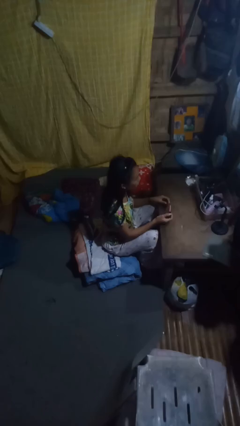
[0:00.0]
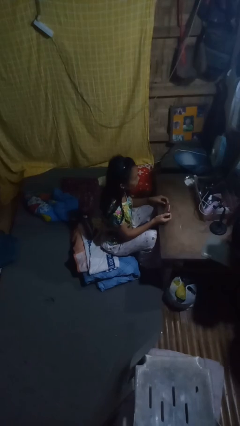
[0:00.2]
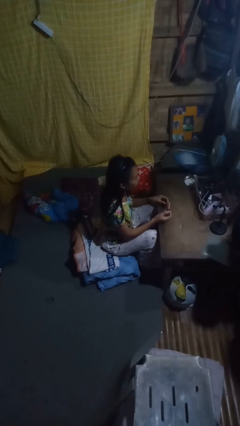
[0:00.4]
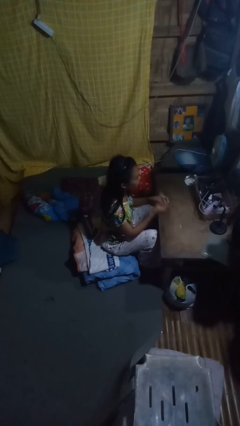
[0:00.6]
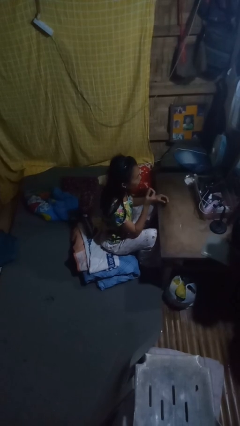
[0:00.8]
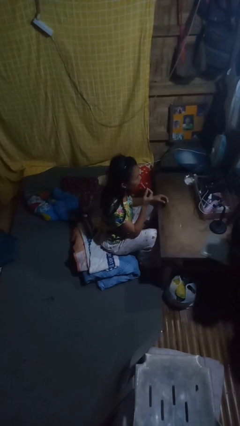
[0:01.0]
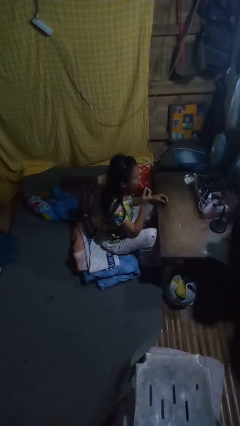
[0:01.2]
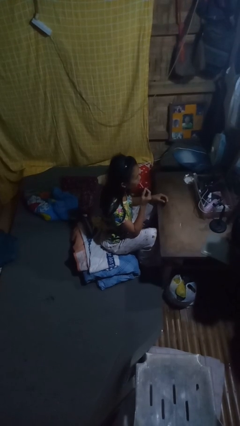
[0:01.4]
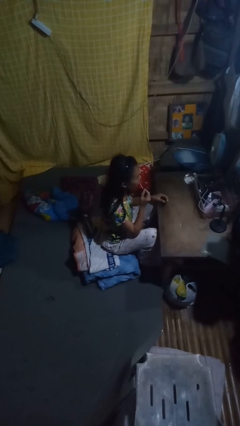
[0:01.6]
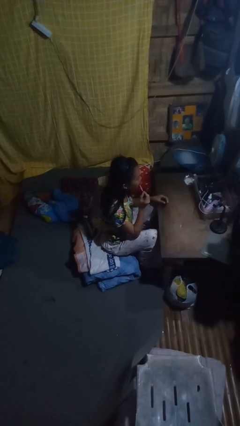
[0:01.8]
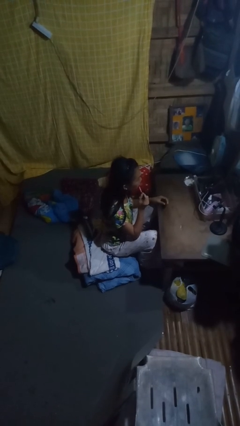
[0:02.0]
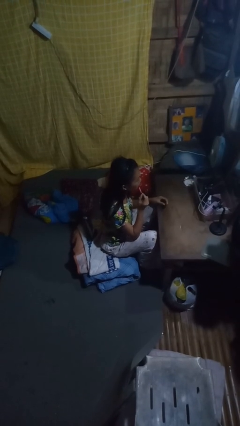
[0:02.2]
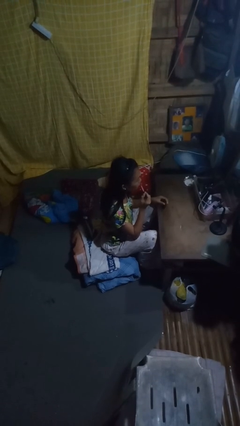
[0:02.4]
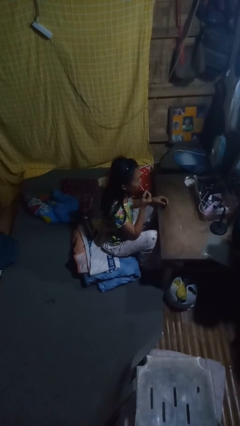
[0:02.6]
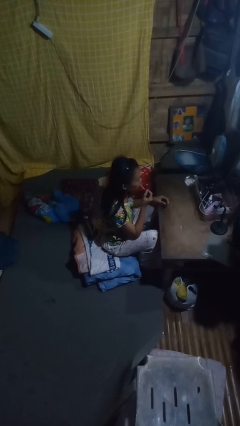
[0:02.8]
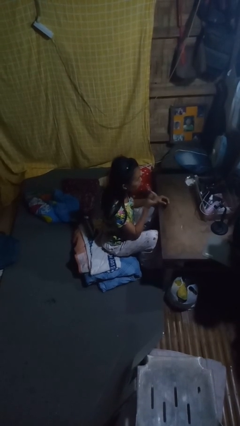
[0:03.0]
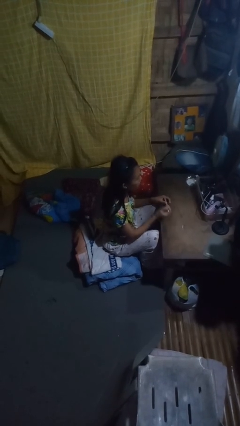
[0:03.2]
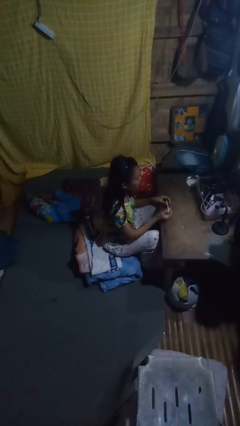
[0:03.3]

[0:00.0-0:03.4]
person applies lip makeup

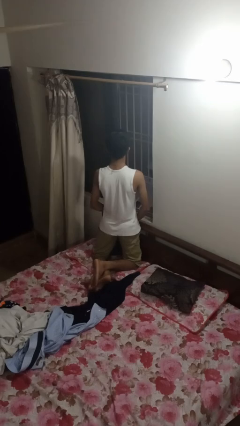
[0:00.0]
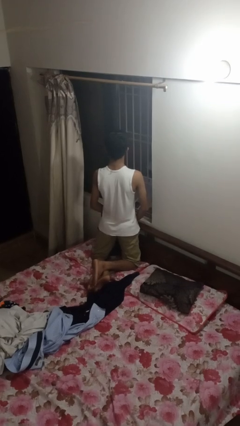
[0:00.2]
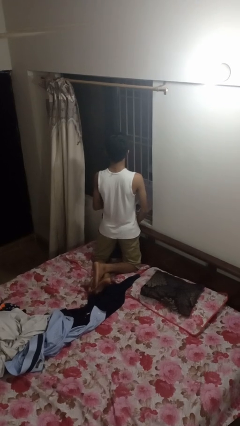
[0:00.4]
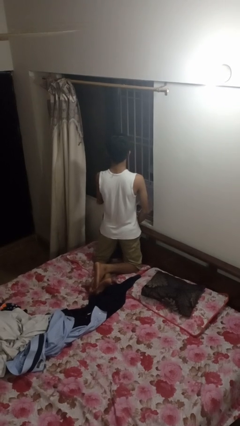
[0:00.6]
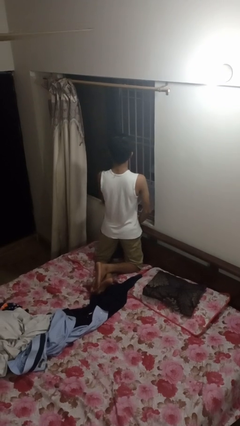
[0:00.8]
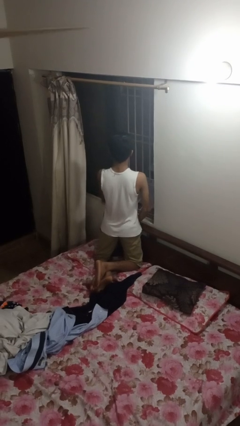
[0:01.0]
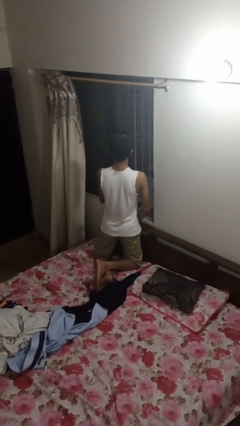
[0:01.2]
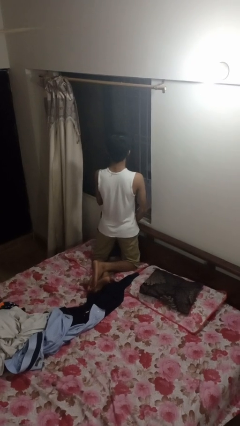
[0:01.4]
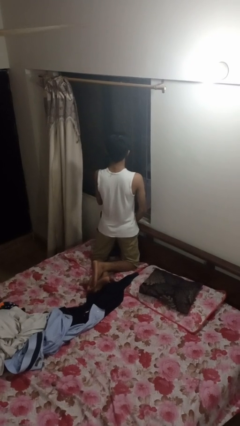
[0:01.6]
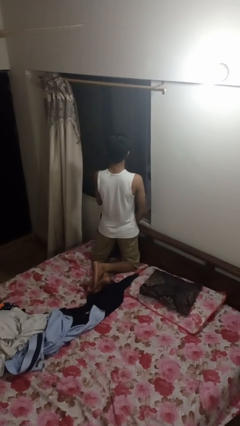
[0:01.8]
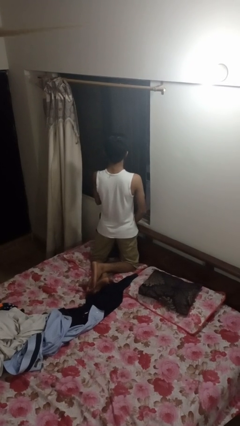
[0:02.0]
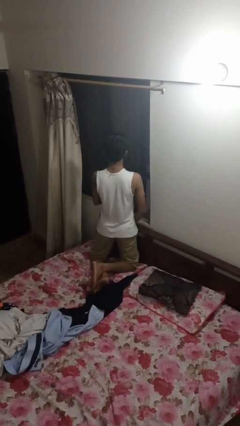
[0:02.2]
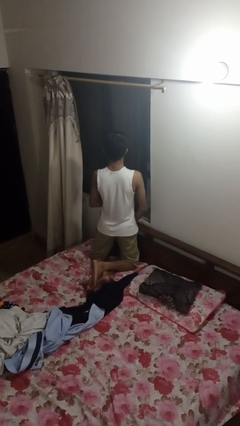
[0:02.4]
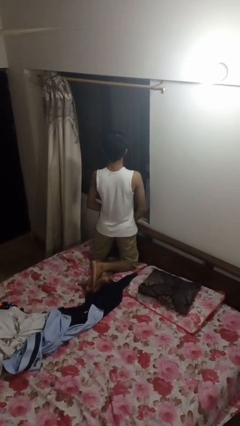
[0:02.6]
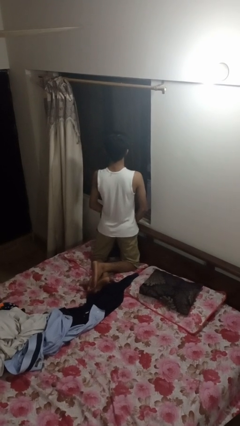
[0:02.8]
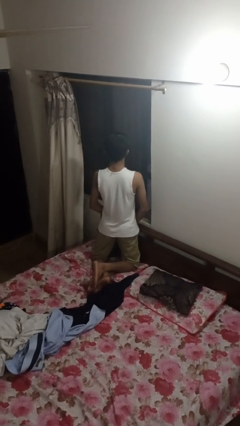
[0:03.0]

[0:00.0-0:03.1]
person closes home window

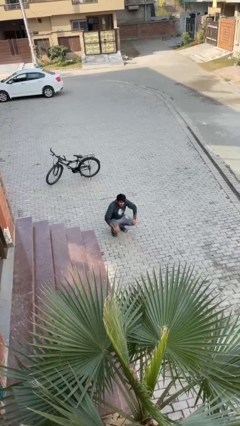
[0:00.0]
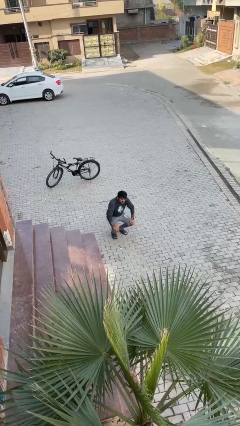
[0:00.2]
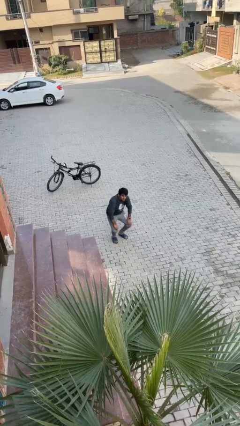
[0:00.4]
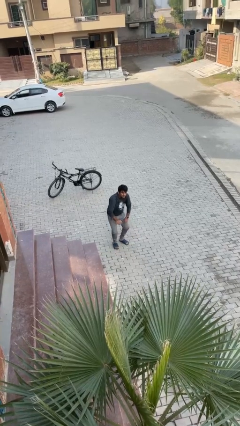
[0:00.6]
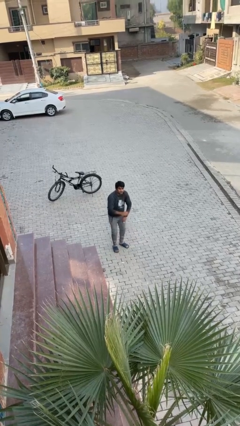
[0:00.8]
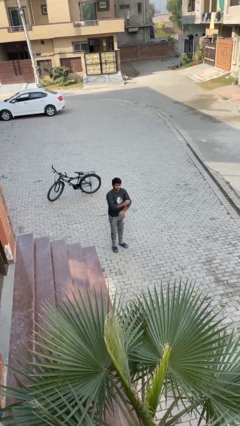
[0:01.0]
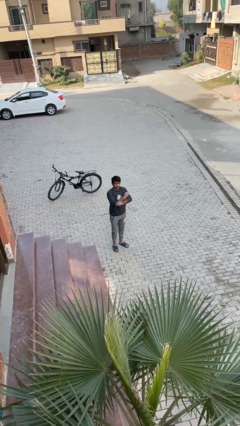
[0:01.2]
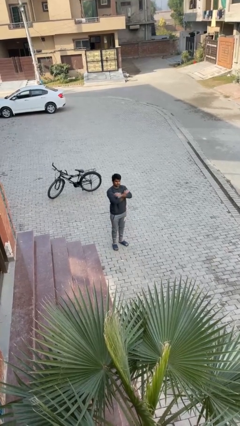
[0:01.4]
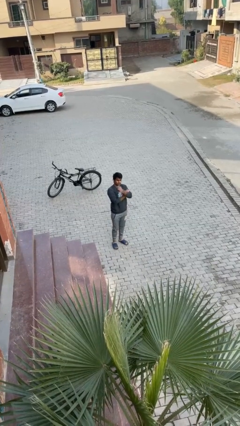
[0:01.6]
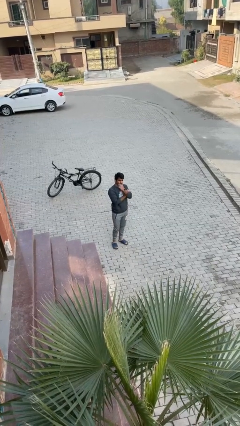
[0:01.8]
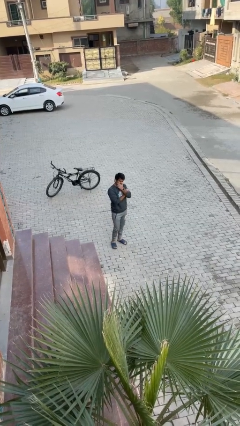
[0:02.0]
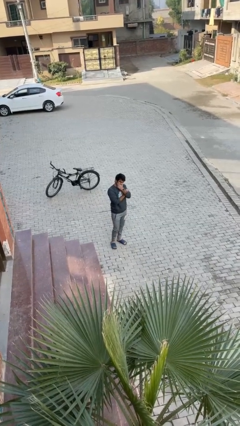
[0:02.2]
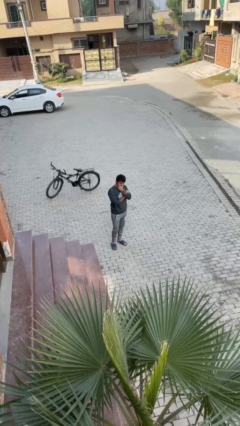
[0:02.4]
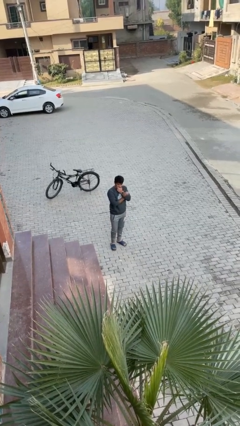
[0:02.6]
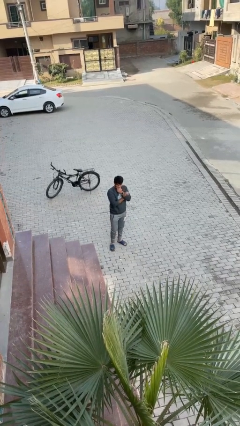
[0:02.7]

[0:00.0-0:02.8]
person stands up

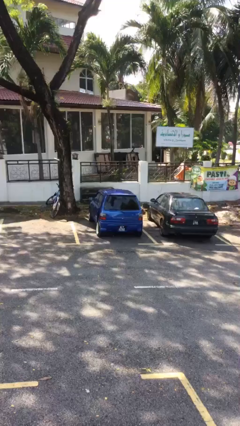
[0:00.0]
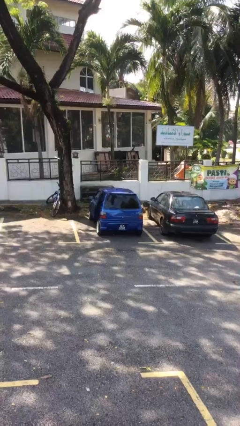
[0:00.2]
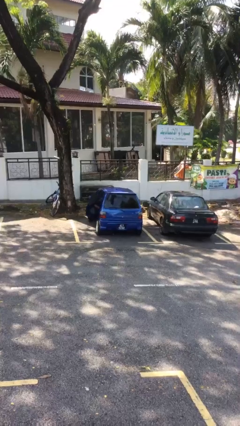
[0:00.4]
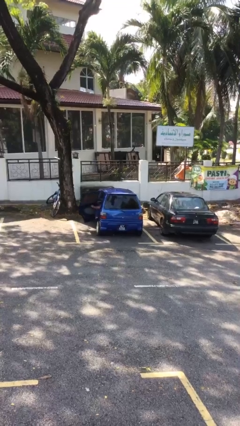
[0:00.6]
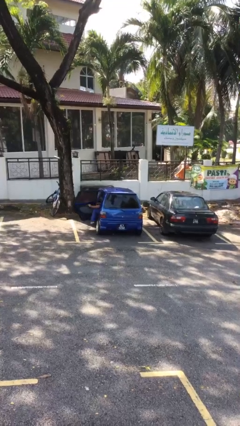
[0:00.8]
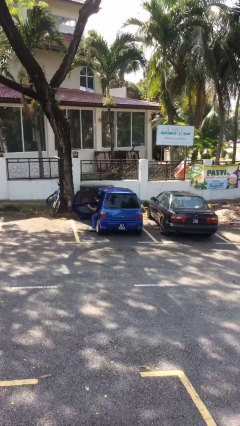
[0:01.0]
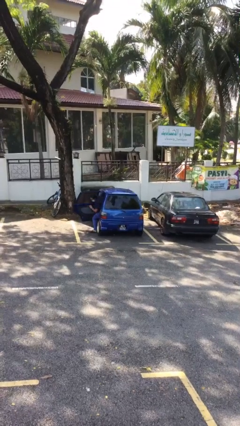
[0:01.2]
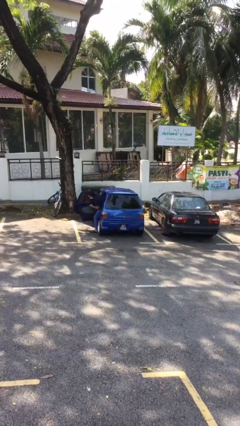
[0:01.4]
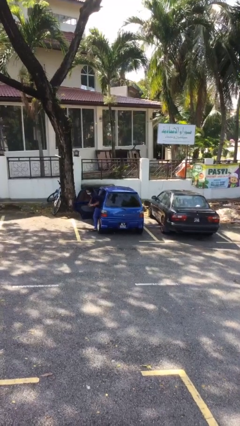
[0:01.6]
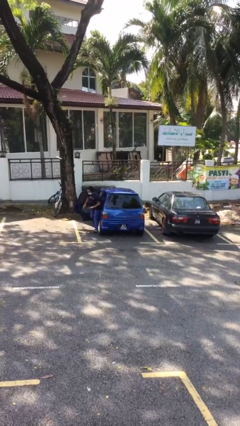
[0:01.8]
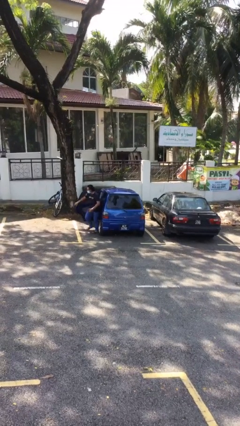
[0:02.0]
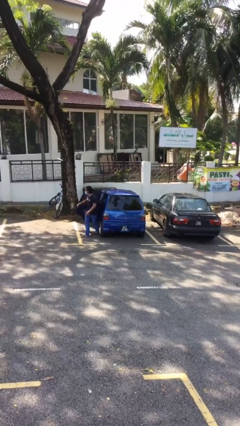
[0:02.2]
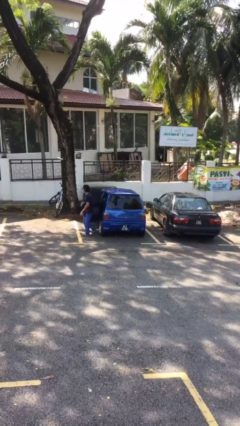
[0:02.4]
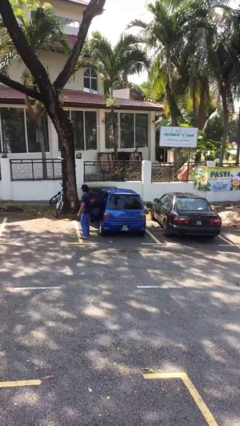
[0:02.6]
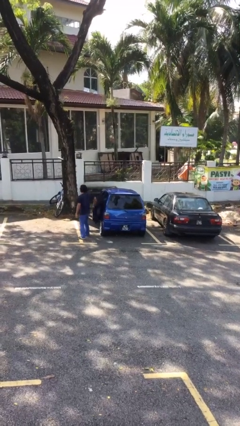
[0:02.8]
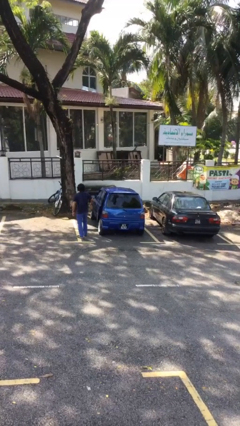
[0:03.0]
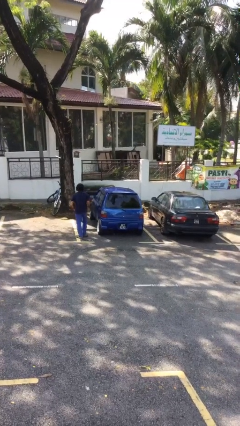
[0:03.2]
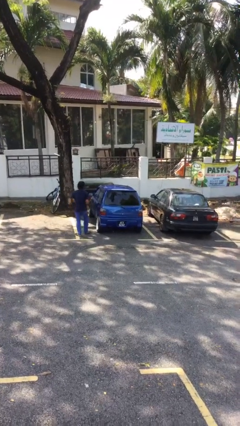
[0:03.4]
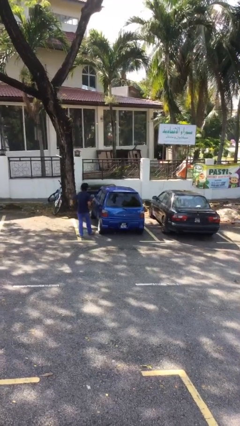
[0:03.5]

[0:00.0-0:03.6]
car drops off person

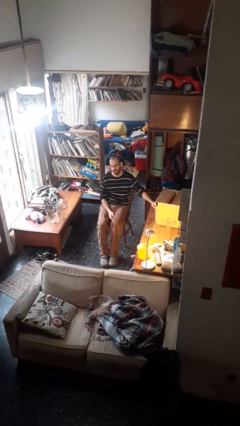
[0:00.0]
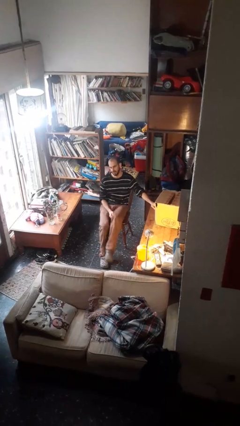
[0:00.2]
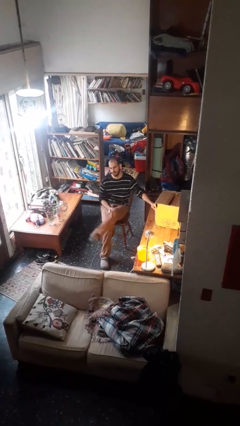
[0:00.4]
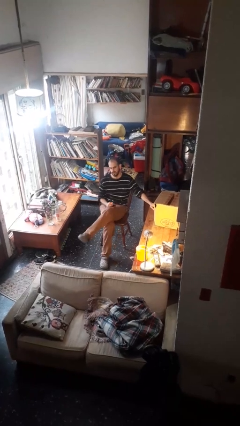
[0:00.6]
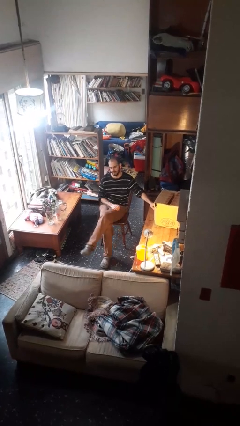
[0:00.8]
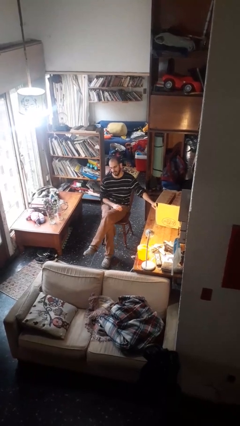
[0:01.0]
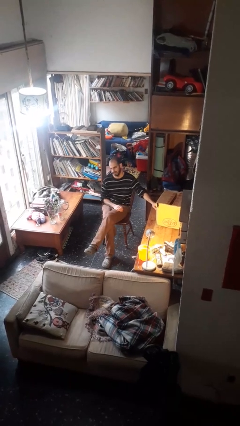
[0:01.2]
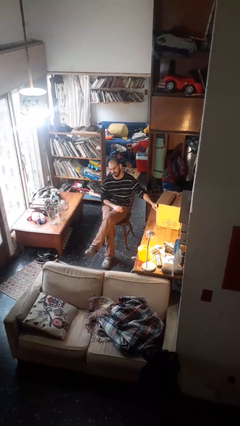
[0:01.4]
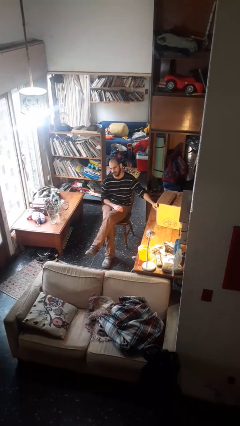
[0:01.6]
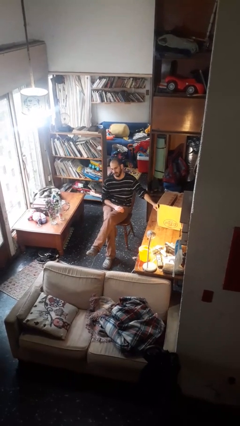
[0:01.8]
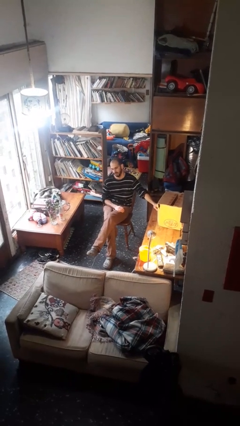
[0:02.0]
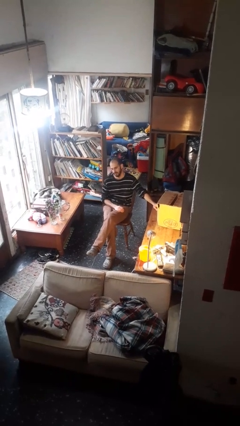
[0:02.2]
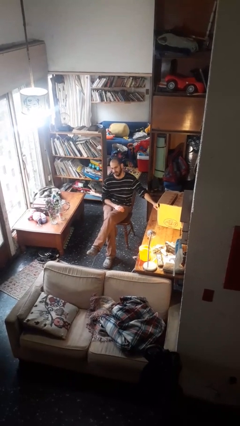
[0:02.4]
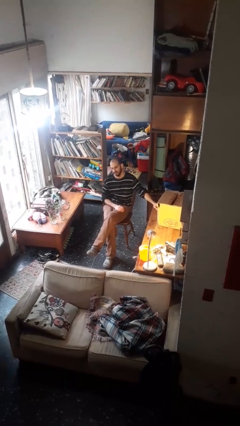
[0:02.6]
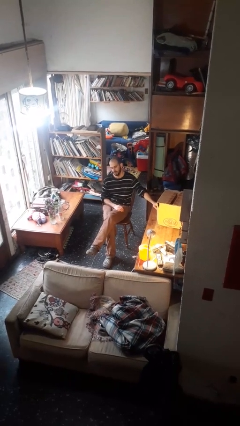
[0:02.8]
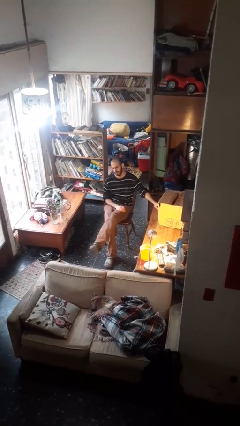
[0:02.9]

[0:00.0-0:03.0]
person crosses legs

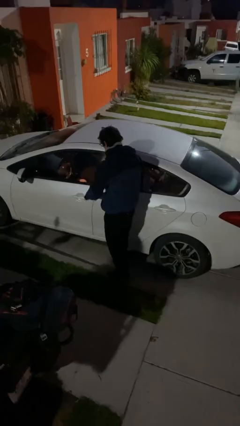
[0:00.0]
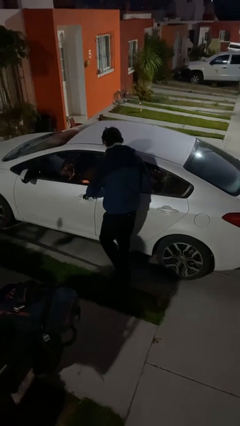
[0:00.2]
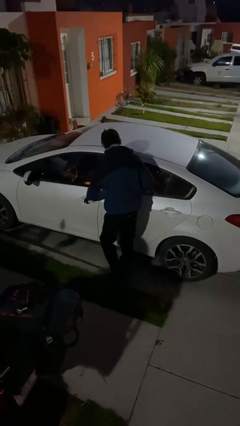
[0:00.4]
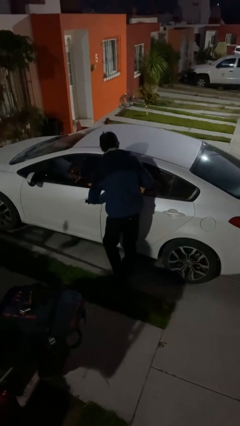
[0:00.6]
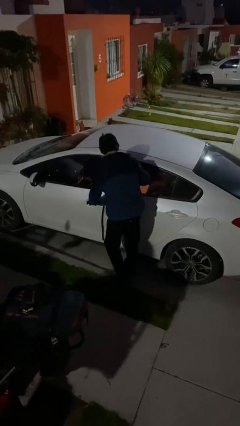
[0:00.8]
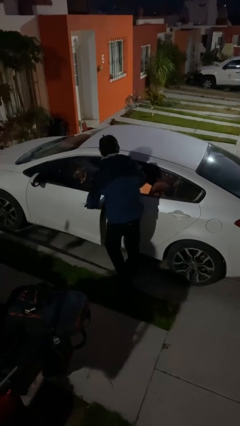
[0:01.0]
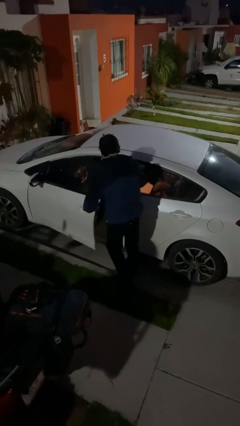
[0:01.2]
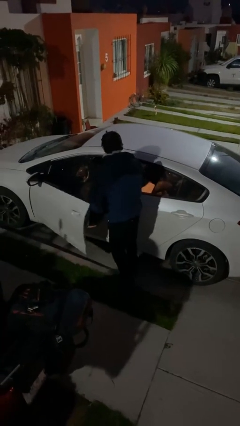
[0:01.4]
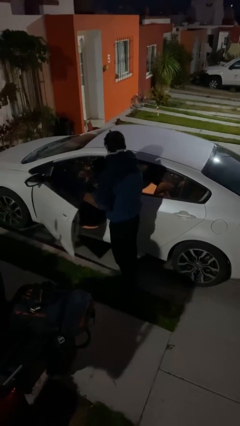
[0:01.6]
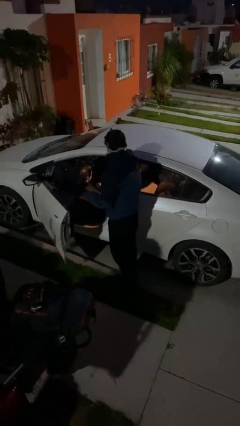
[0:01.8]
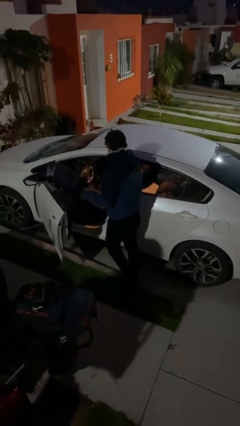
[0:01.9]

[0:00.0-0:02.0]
person opens car door

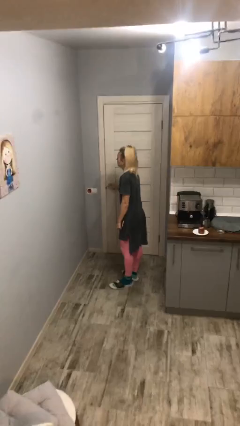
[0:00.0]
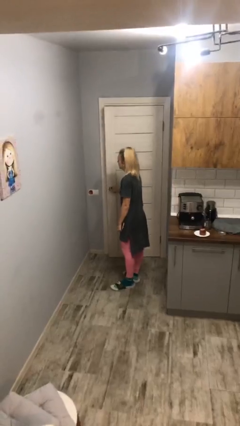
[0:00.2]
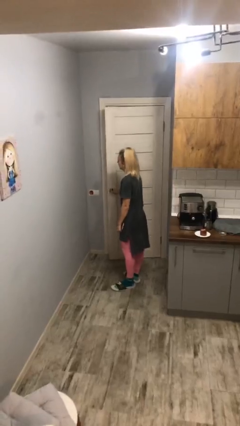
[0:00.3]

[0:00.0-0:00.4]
person opens facility door
